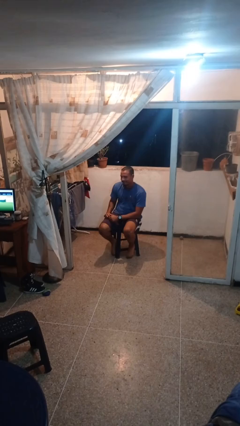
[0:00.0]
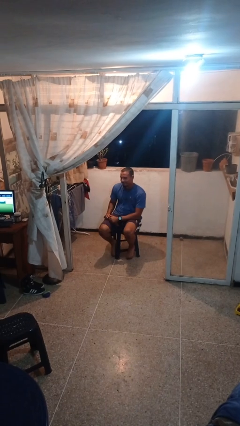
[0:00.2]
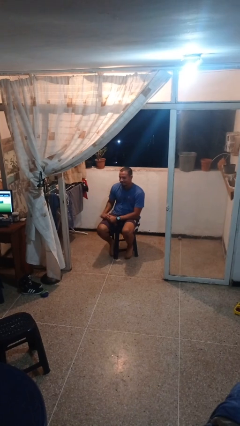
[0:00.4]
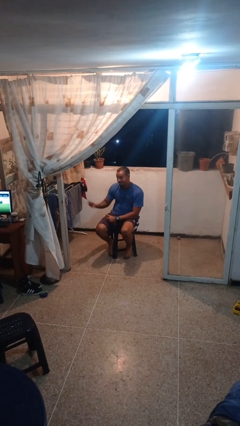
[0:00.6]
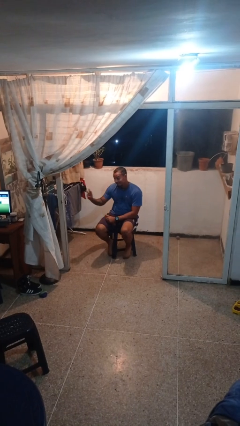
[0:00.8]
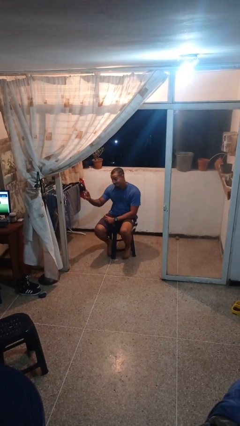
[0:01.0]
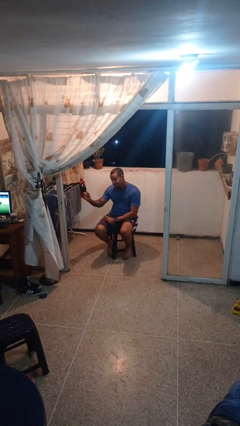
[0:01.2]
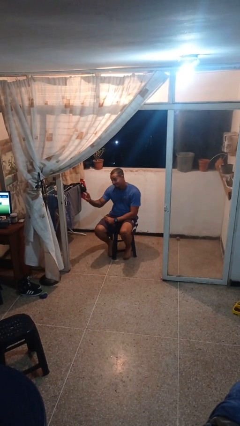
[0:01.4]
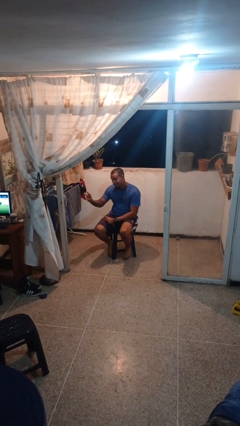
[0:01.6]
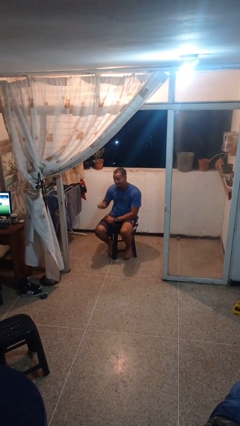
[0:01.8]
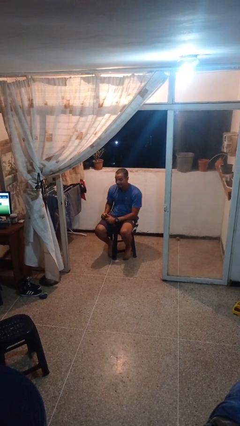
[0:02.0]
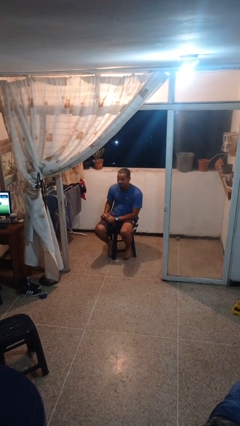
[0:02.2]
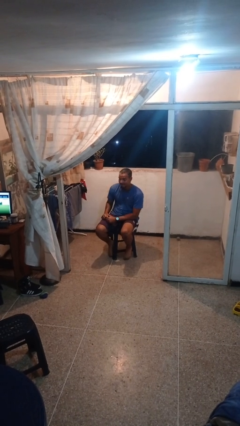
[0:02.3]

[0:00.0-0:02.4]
person gestures number three

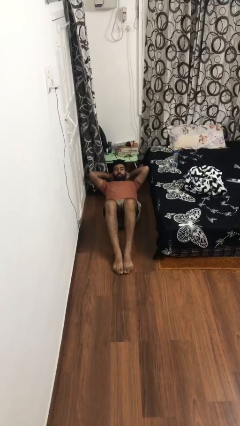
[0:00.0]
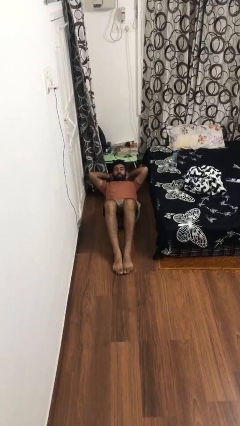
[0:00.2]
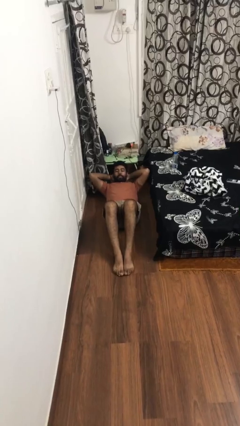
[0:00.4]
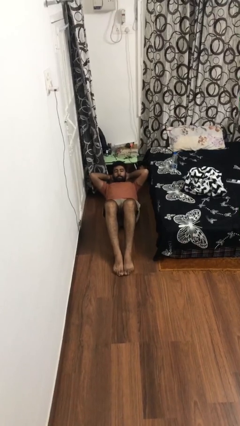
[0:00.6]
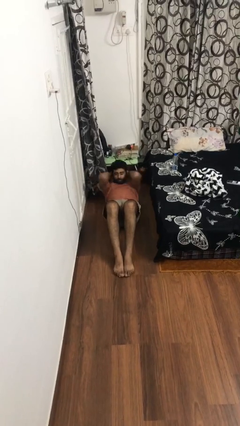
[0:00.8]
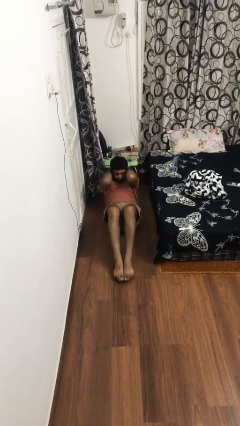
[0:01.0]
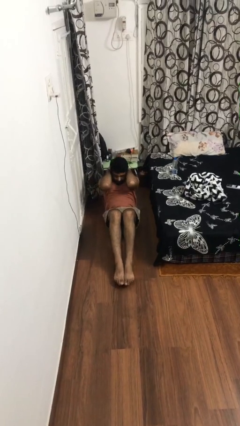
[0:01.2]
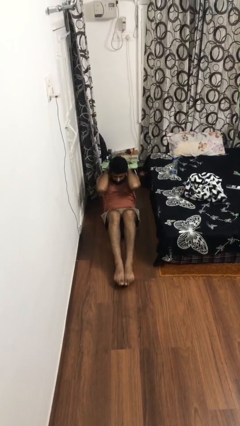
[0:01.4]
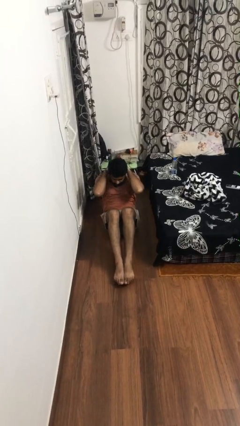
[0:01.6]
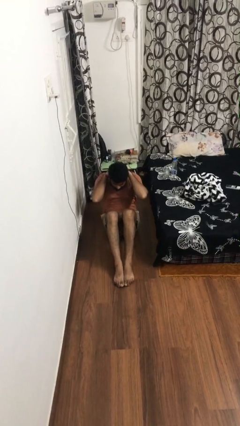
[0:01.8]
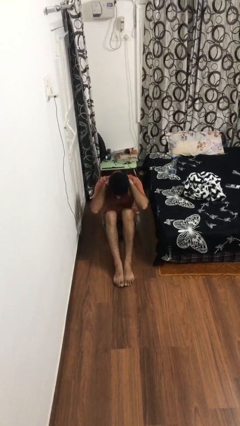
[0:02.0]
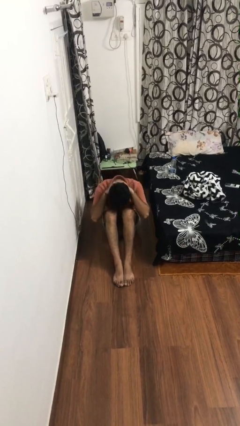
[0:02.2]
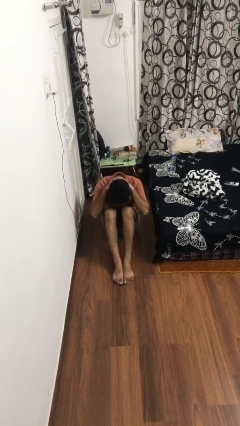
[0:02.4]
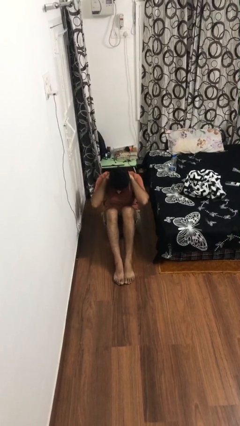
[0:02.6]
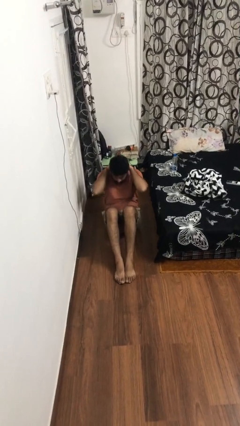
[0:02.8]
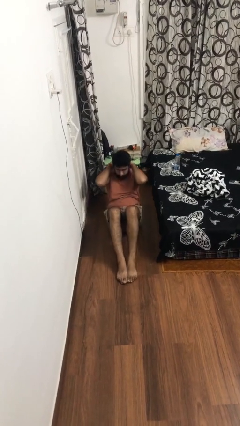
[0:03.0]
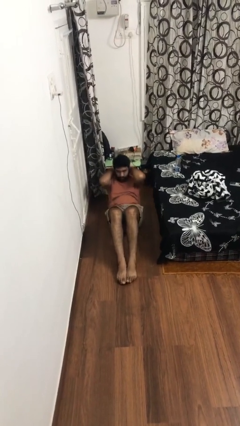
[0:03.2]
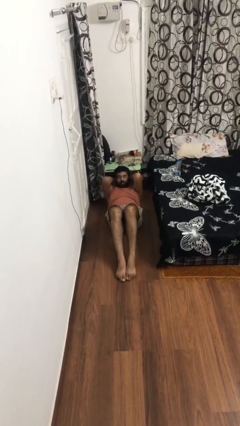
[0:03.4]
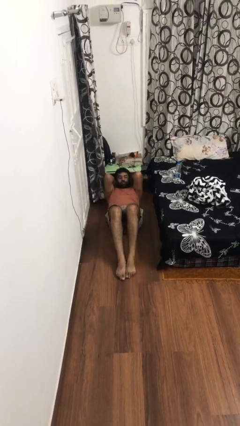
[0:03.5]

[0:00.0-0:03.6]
person exercises with situp

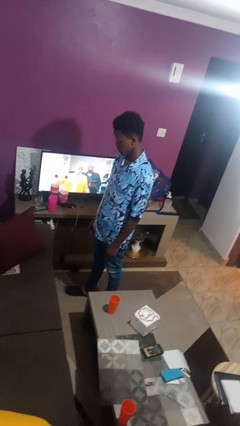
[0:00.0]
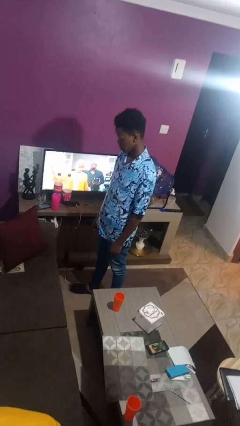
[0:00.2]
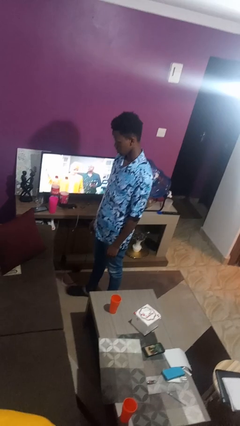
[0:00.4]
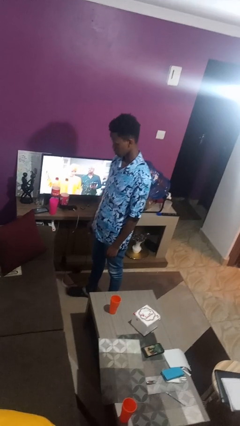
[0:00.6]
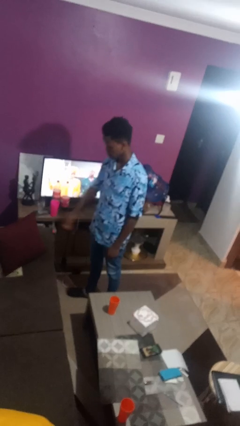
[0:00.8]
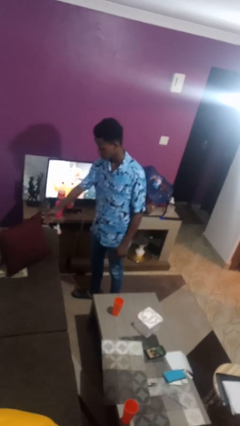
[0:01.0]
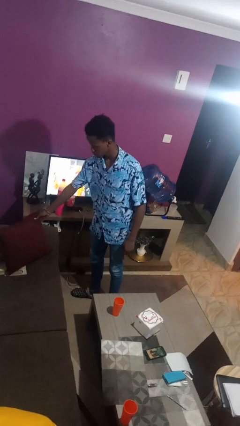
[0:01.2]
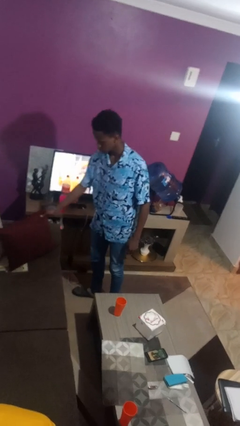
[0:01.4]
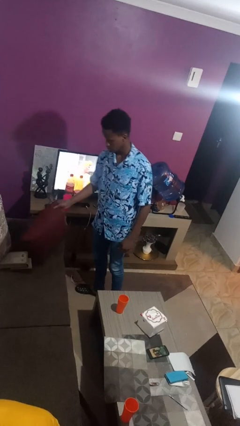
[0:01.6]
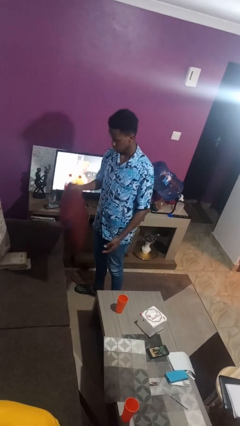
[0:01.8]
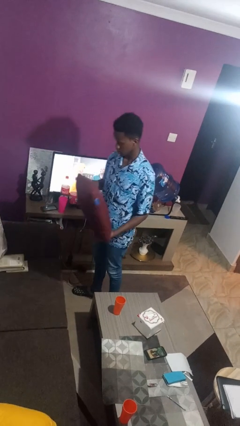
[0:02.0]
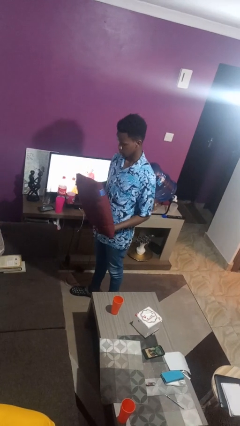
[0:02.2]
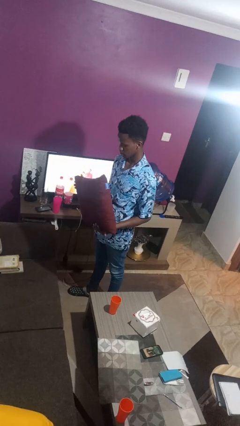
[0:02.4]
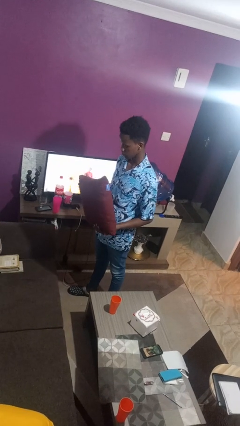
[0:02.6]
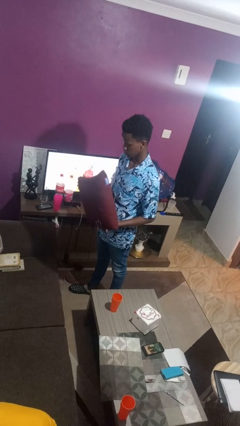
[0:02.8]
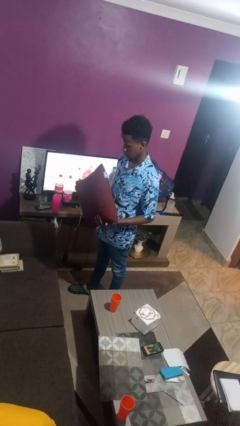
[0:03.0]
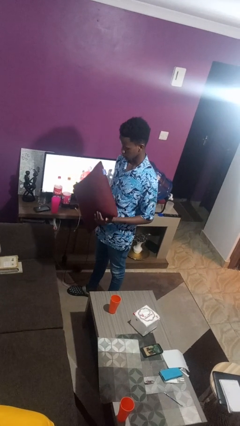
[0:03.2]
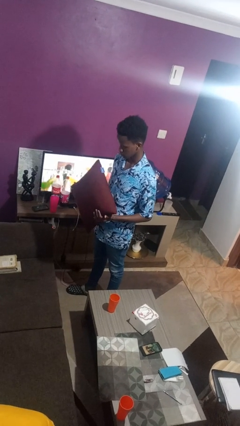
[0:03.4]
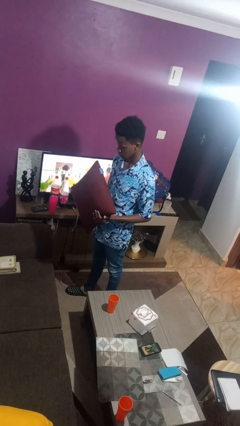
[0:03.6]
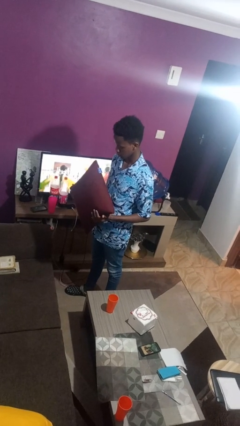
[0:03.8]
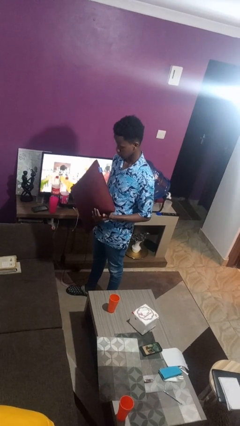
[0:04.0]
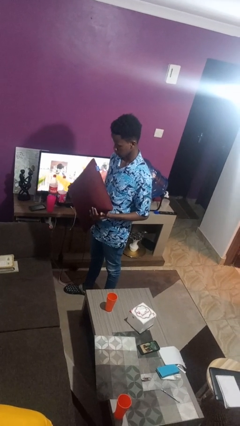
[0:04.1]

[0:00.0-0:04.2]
person picks up object from couch

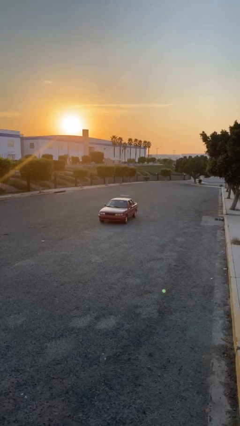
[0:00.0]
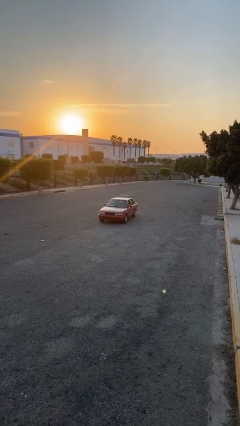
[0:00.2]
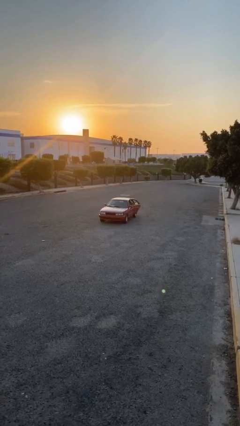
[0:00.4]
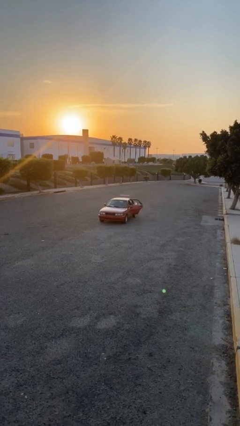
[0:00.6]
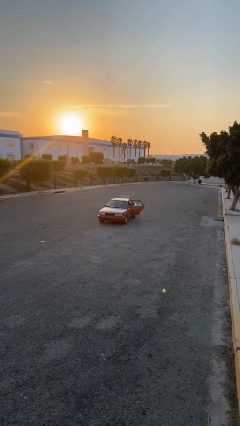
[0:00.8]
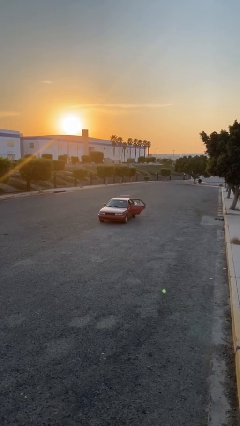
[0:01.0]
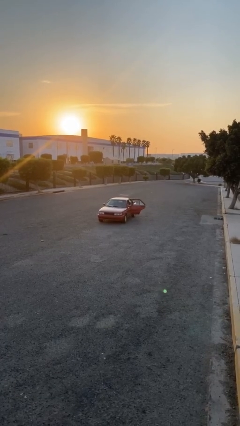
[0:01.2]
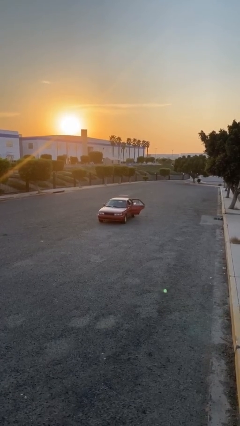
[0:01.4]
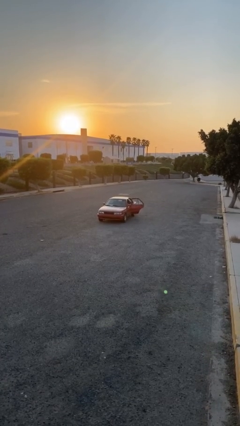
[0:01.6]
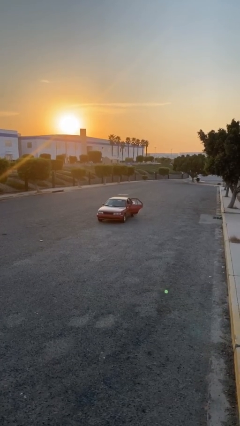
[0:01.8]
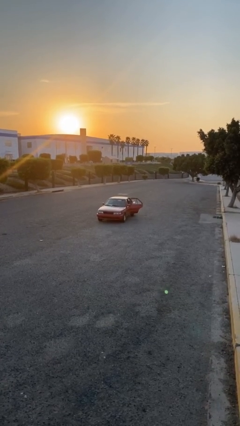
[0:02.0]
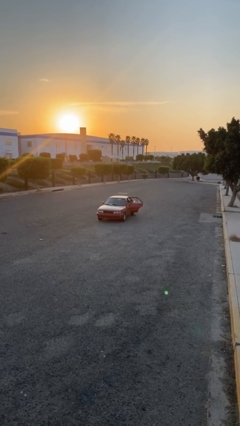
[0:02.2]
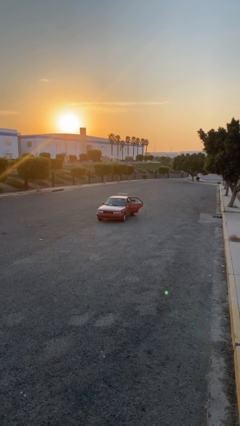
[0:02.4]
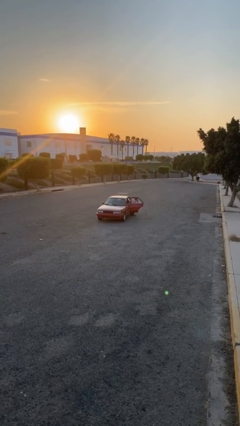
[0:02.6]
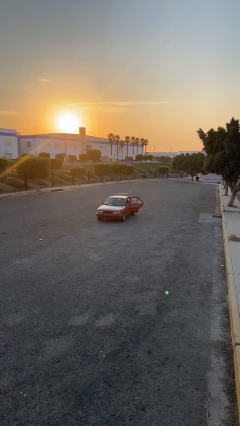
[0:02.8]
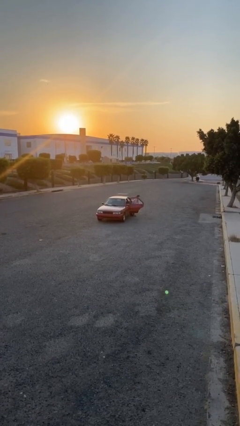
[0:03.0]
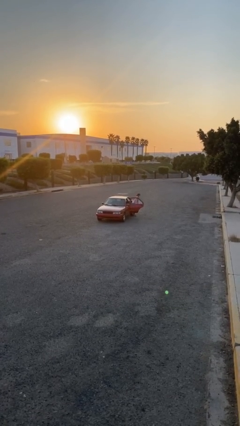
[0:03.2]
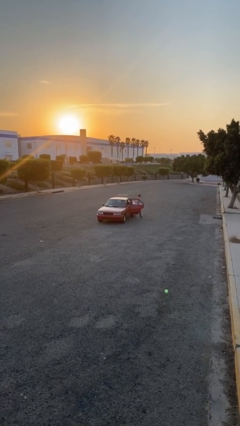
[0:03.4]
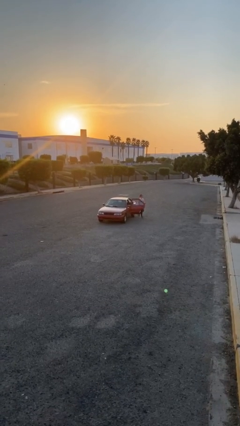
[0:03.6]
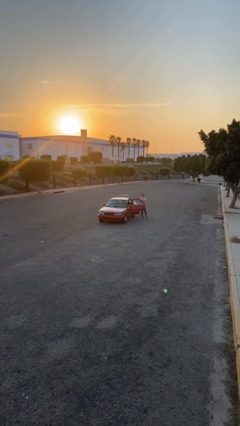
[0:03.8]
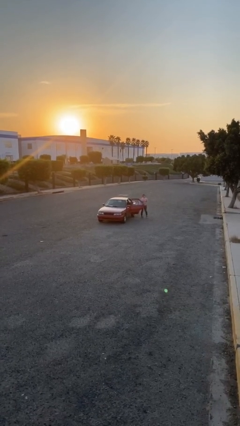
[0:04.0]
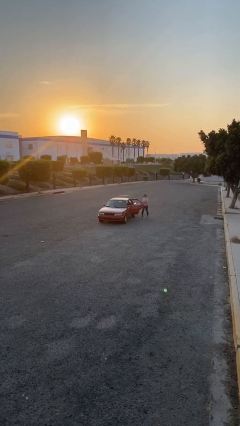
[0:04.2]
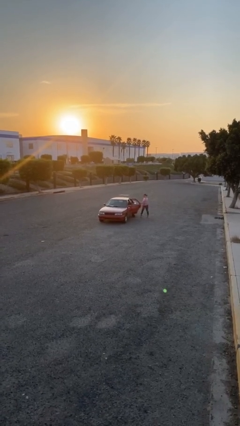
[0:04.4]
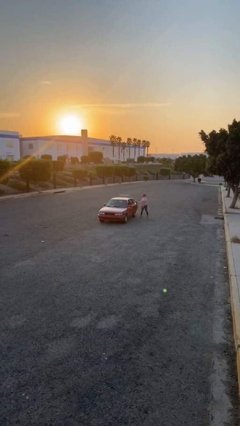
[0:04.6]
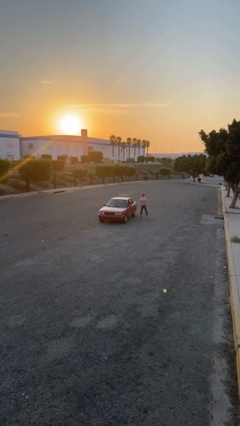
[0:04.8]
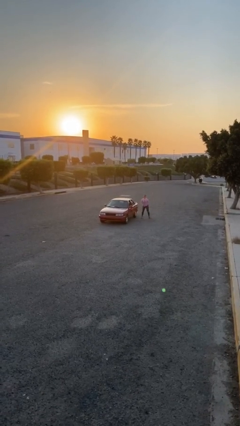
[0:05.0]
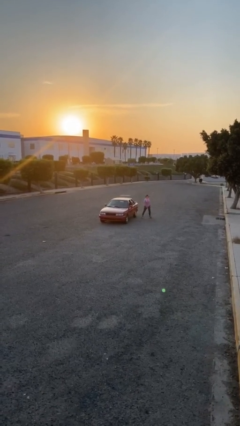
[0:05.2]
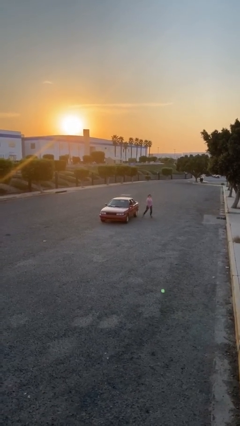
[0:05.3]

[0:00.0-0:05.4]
car drops off person

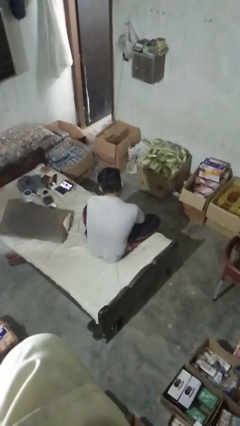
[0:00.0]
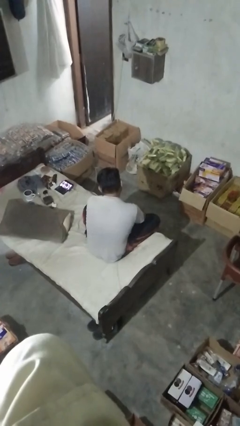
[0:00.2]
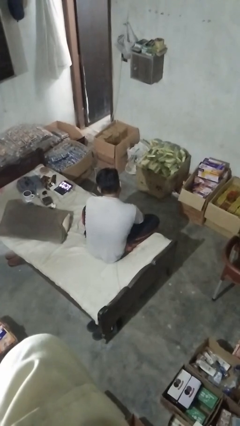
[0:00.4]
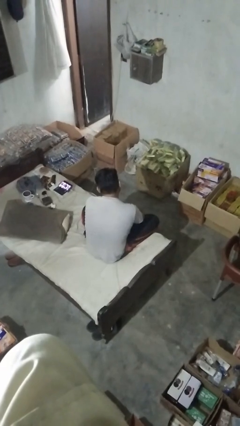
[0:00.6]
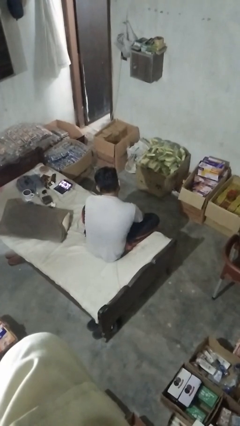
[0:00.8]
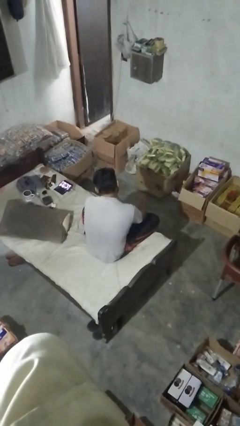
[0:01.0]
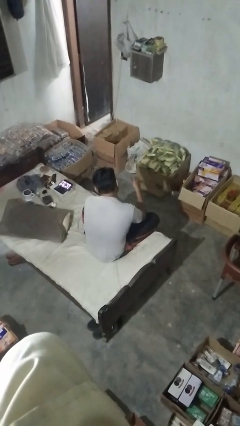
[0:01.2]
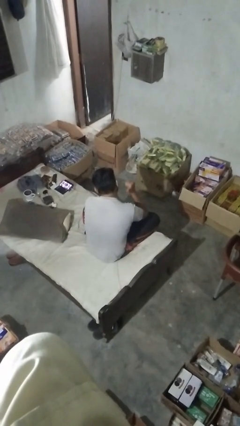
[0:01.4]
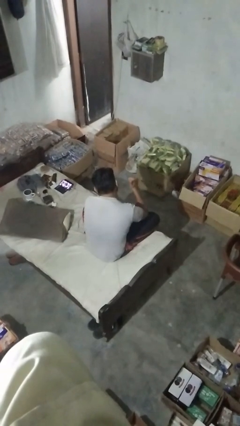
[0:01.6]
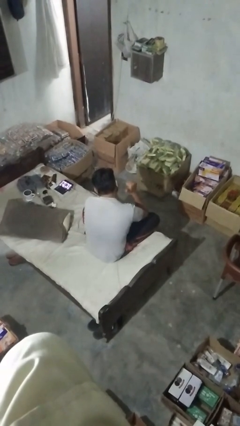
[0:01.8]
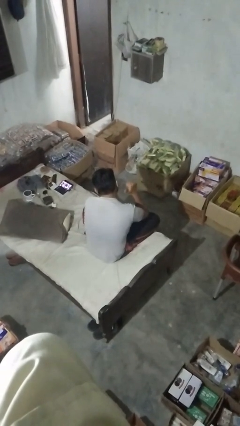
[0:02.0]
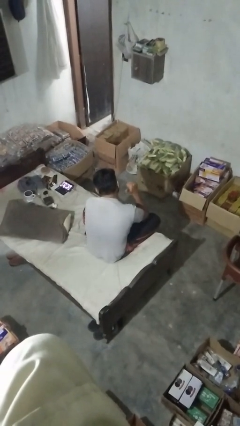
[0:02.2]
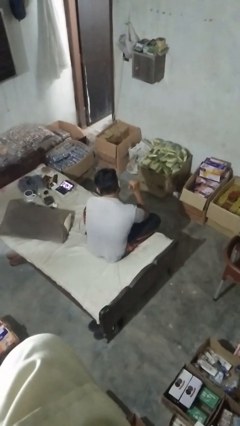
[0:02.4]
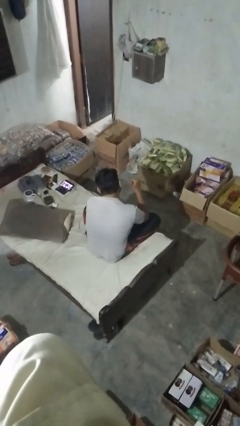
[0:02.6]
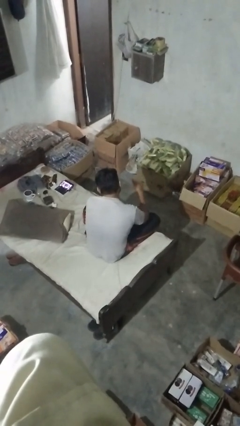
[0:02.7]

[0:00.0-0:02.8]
person gestures behind me
